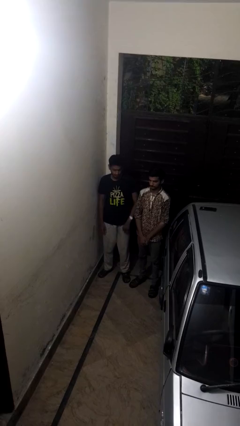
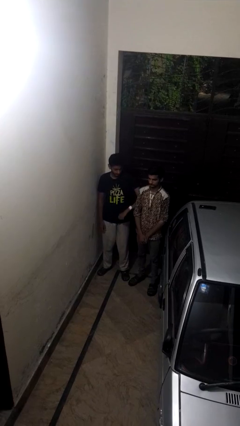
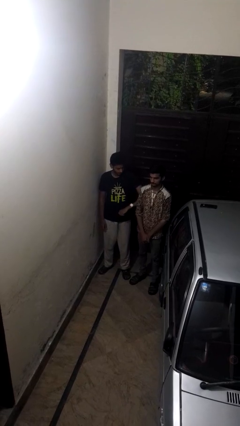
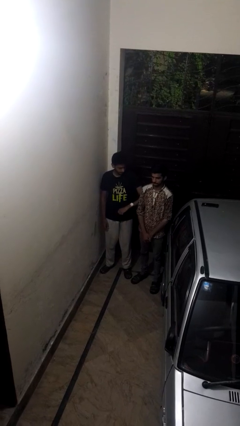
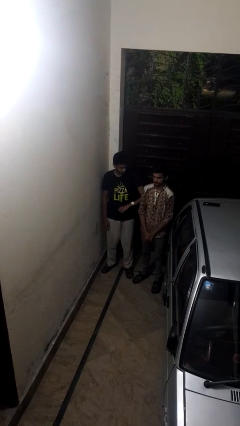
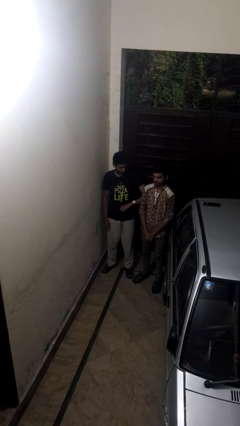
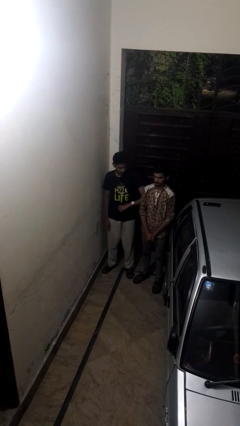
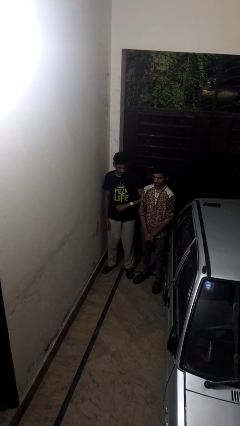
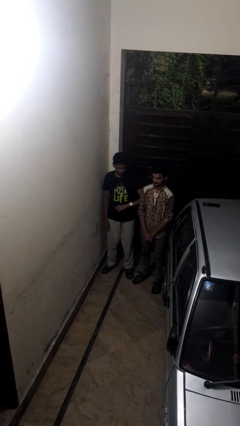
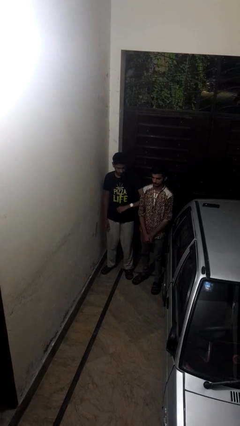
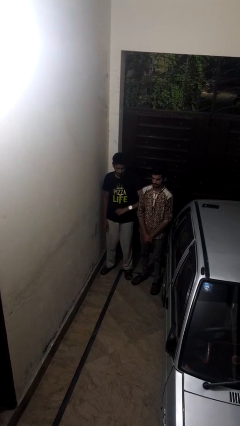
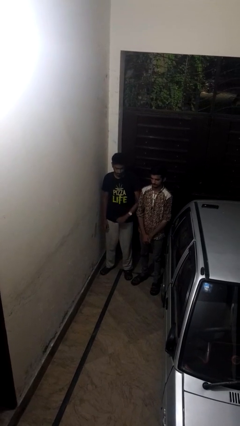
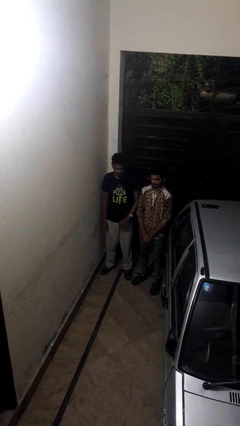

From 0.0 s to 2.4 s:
person nudges person with elbow

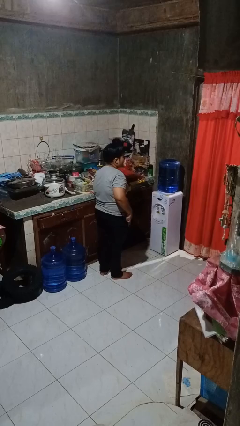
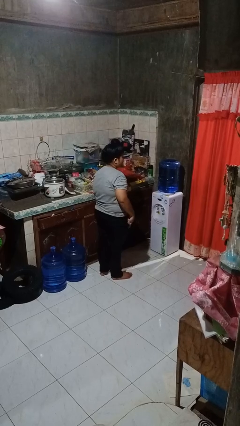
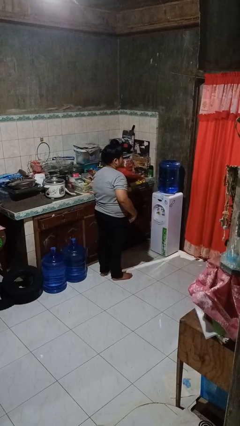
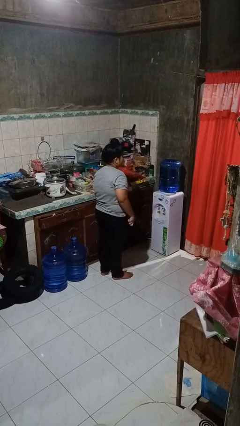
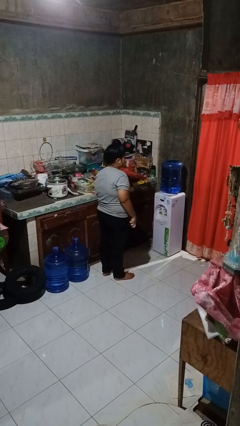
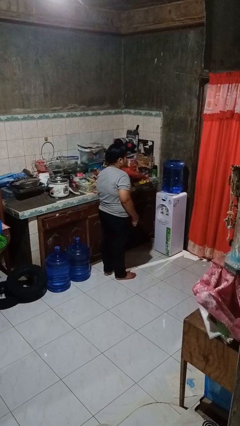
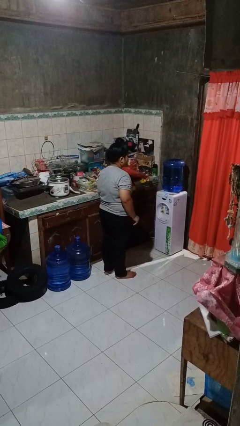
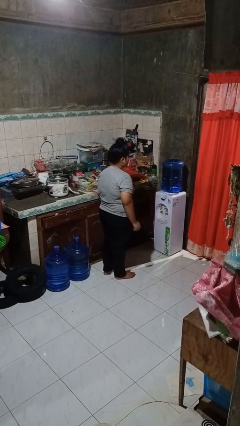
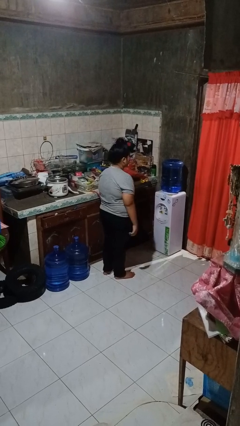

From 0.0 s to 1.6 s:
person puts phone into pocket

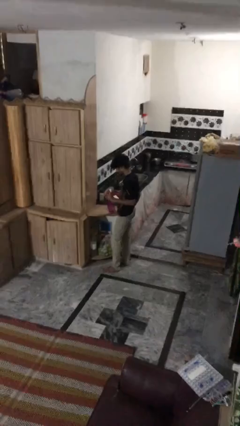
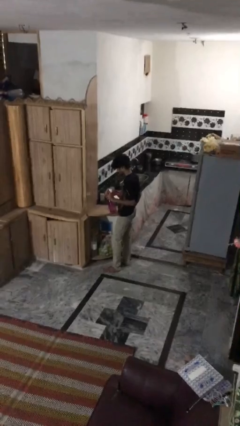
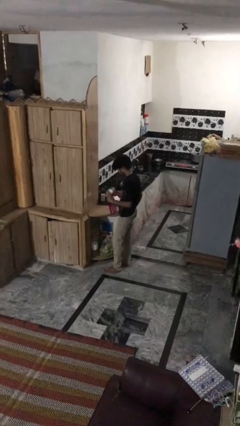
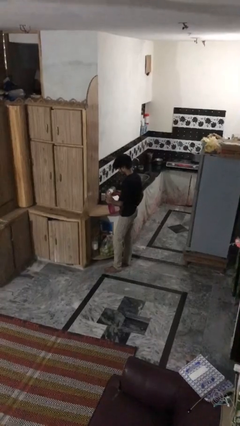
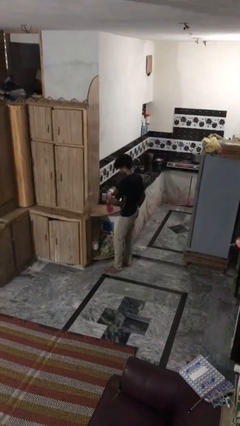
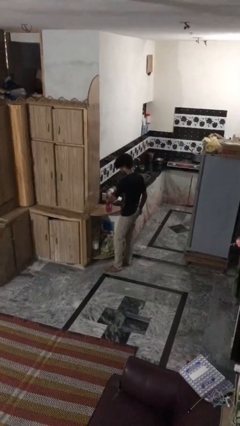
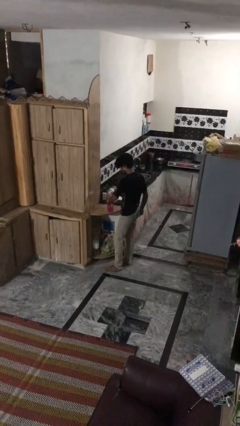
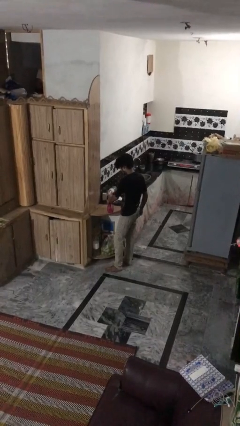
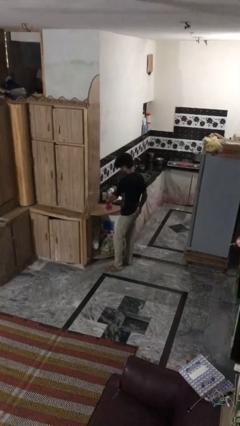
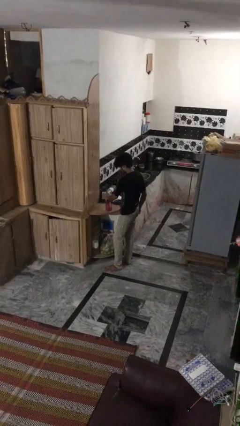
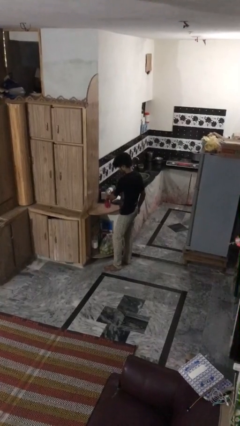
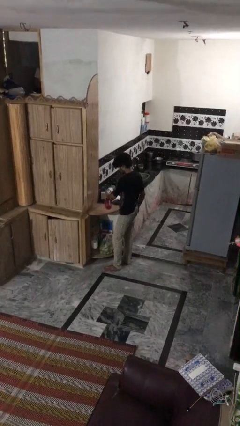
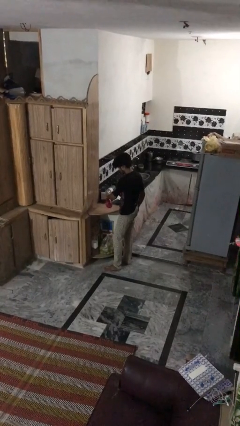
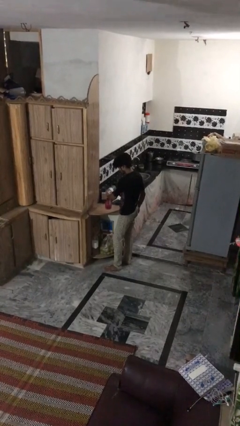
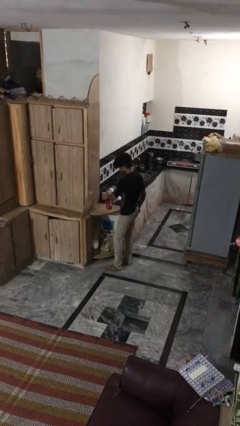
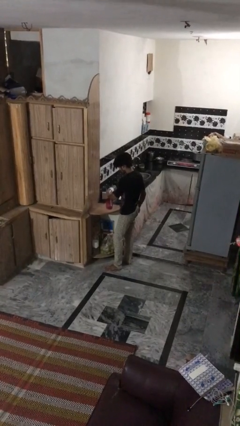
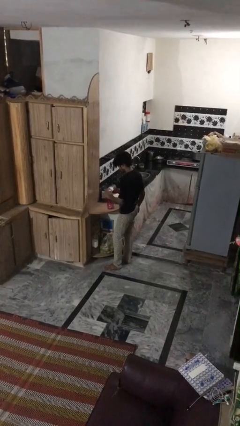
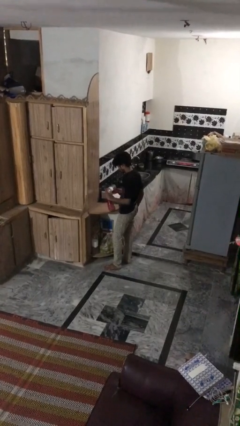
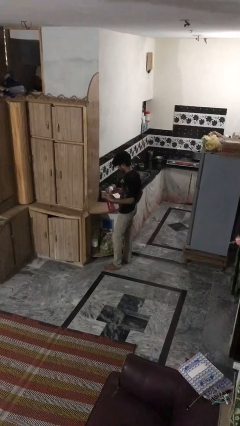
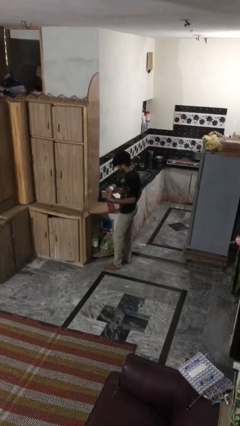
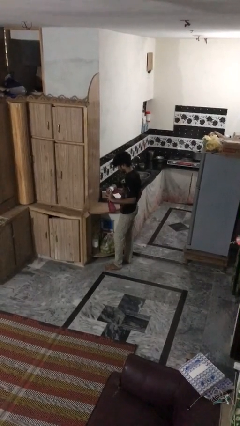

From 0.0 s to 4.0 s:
person sprays from bottle

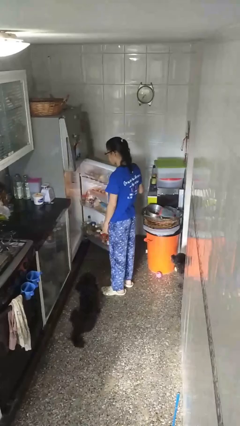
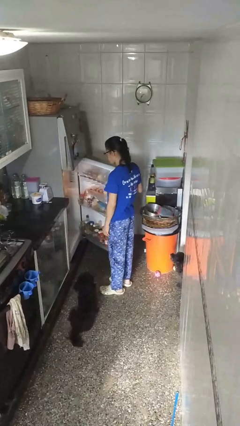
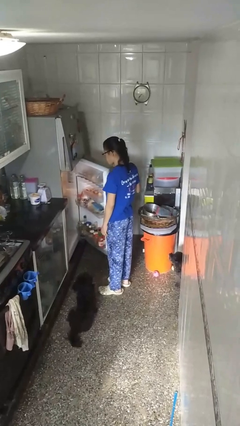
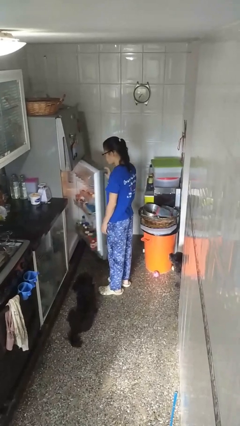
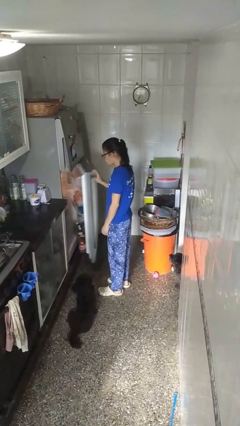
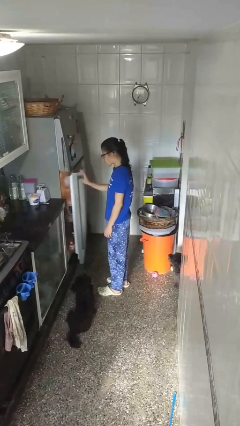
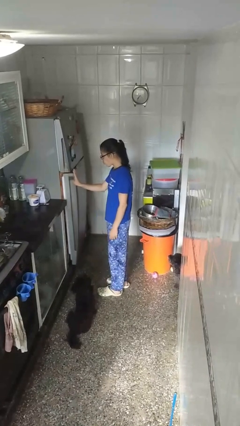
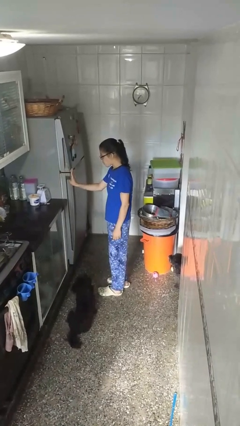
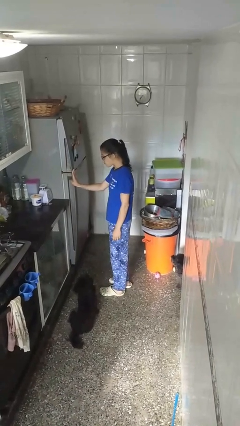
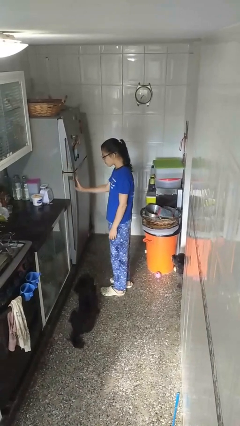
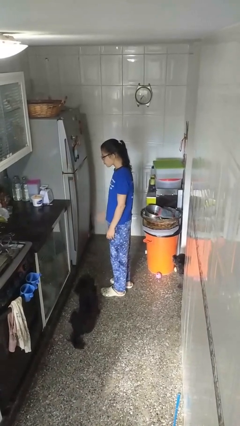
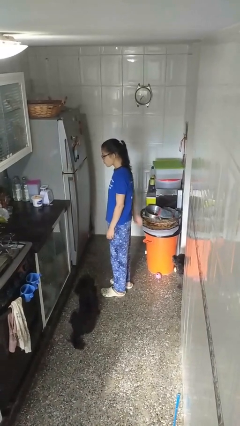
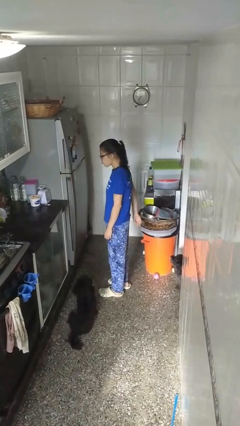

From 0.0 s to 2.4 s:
person closes refrigerator

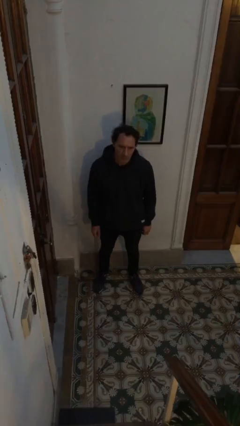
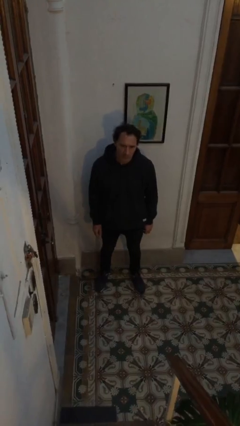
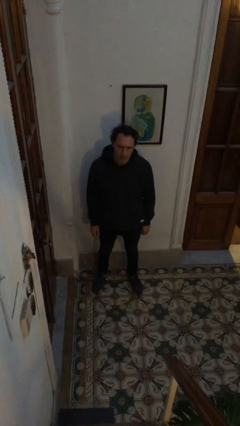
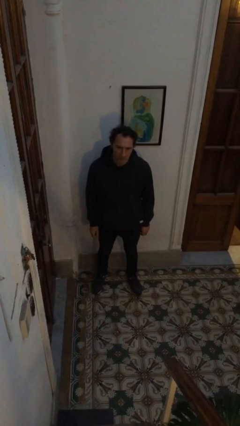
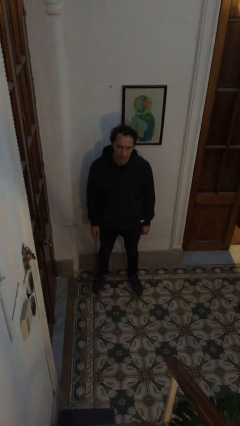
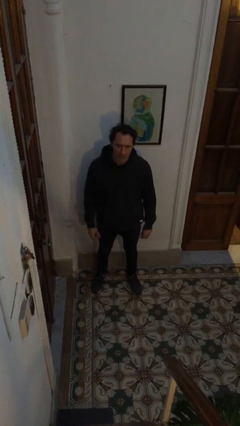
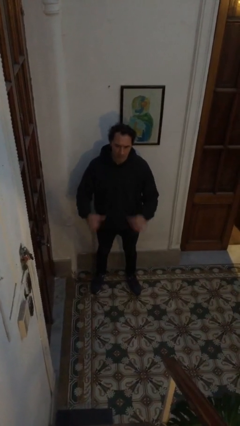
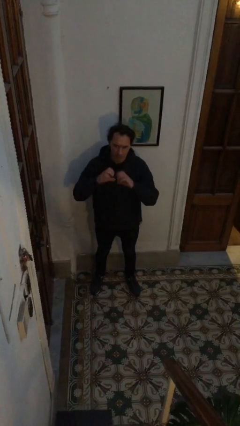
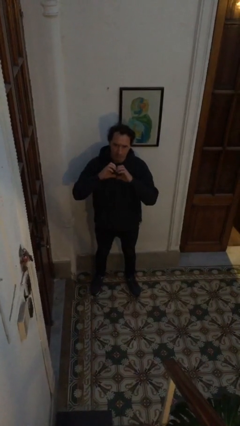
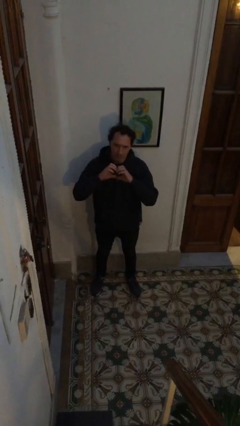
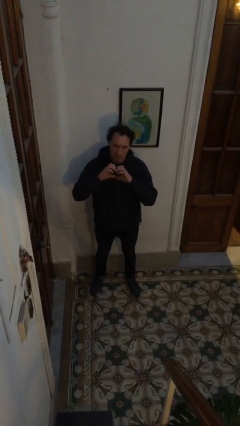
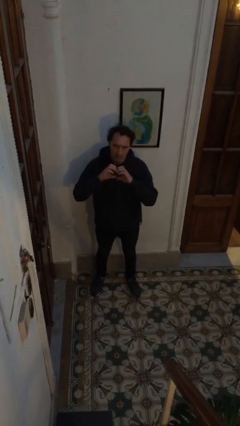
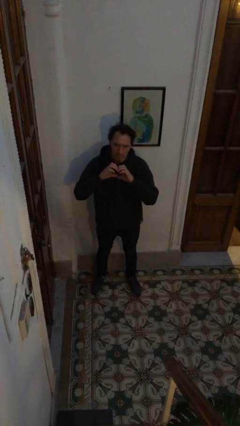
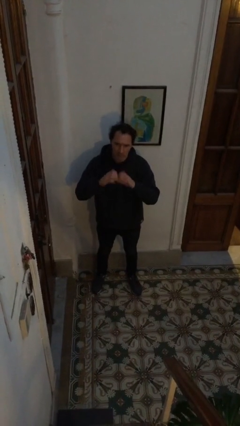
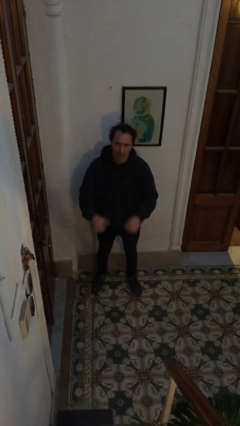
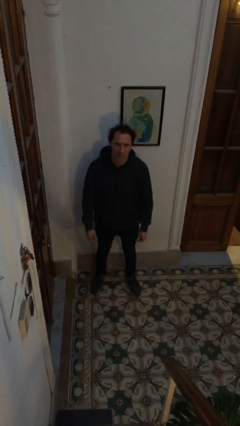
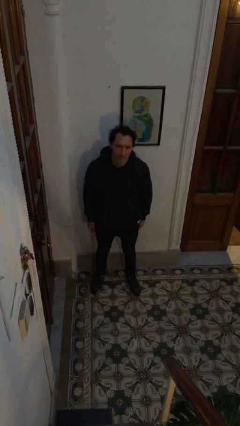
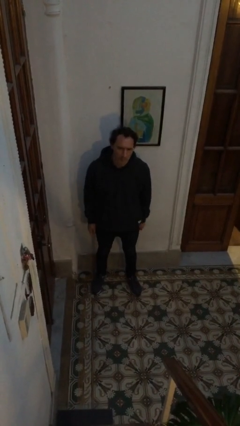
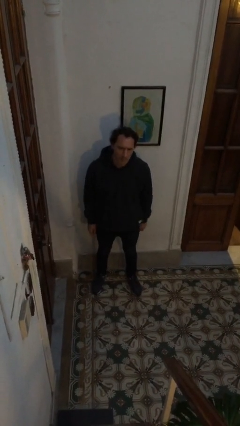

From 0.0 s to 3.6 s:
person gestures heart

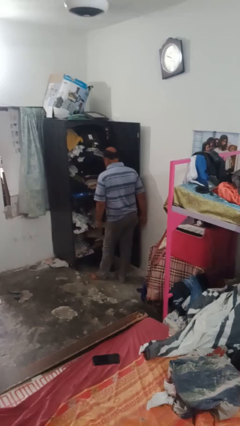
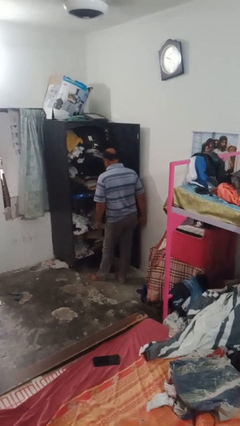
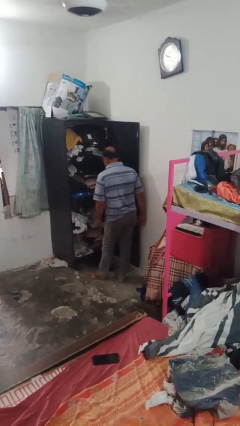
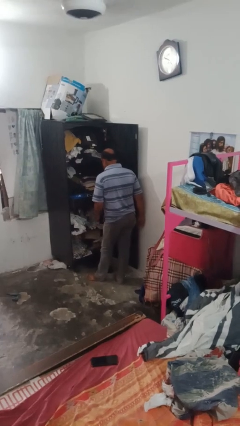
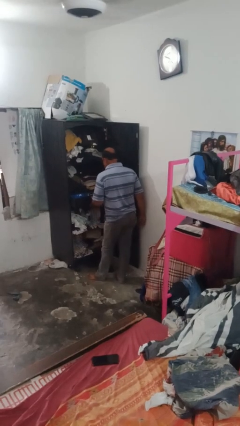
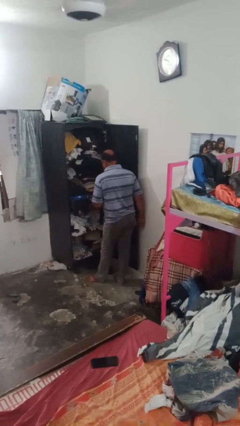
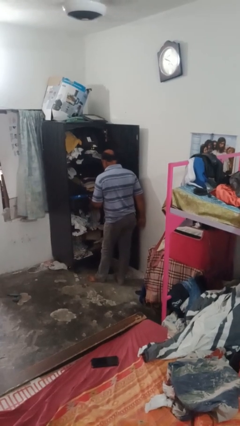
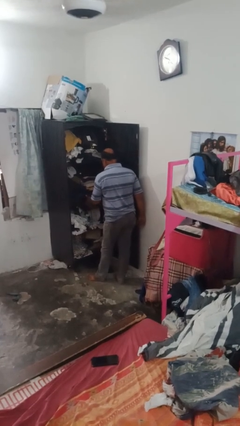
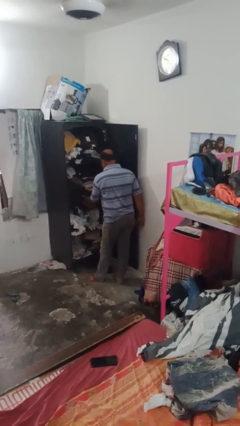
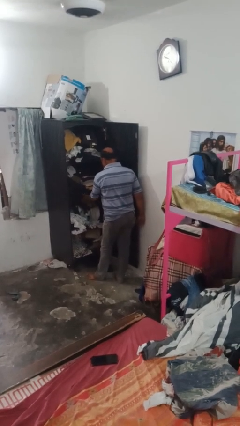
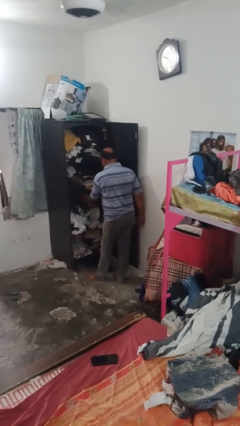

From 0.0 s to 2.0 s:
person closes dresser drawer

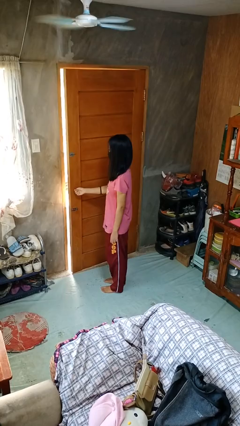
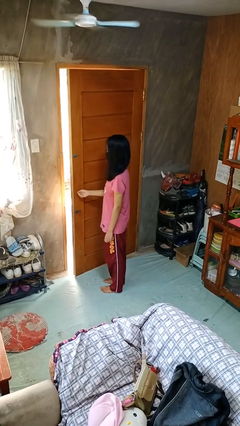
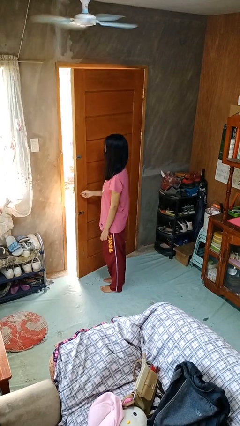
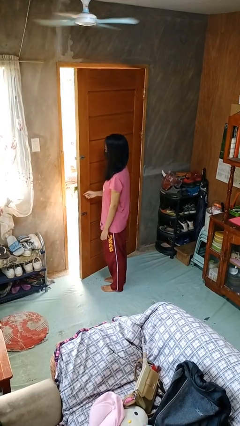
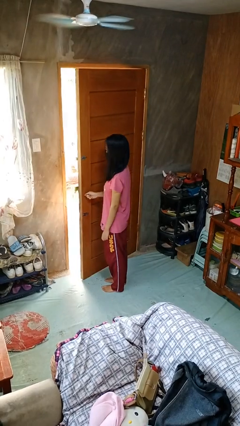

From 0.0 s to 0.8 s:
person opens facility door

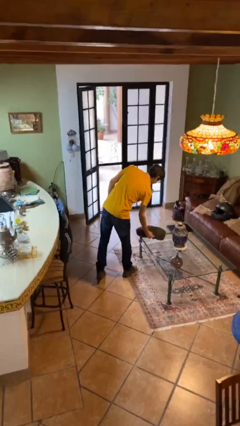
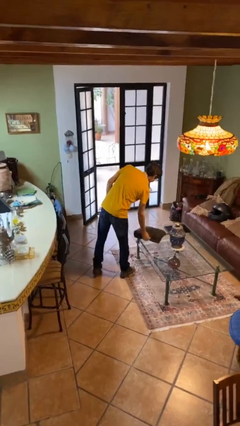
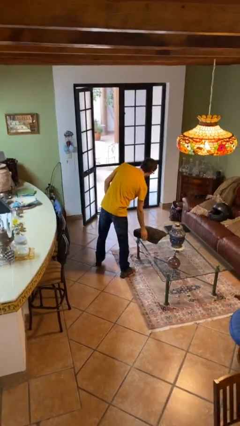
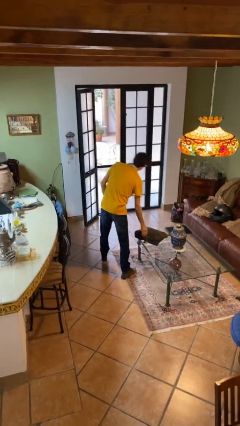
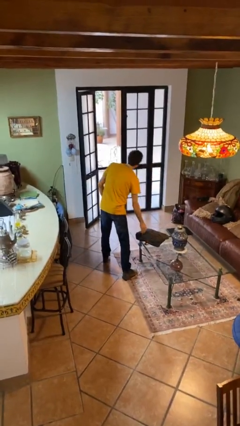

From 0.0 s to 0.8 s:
person puts down object on table
